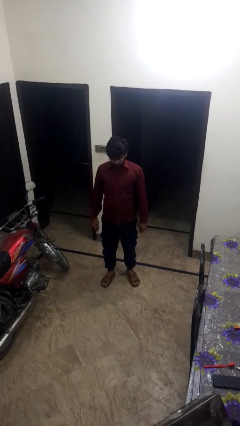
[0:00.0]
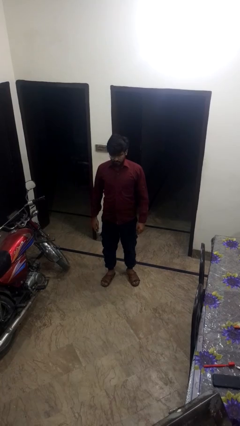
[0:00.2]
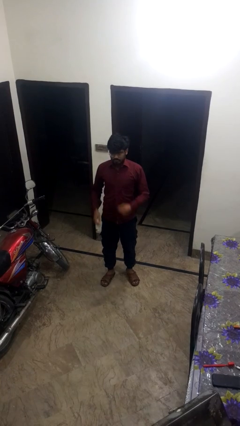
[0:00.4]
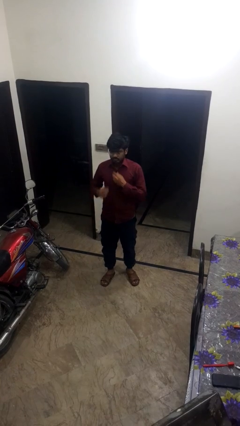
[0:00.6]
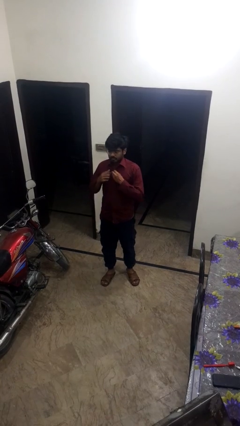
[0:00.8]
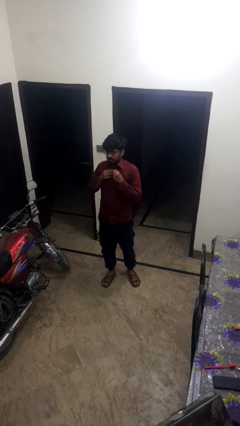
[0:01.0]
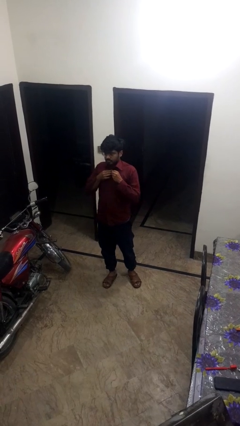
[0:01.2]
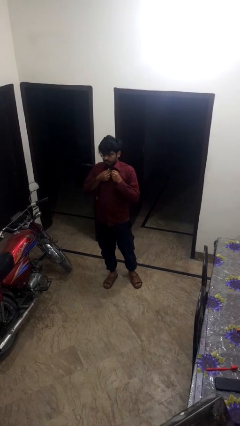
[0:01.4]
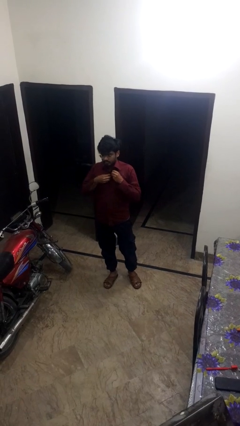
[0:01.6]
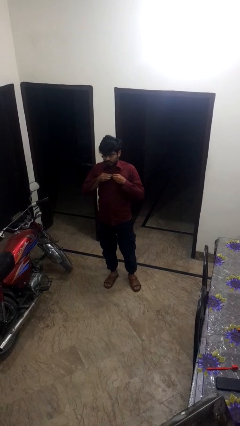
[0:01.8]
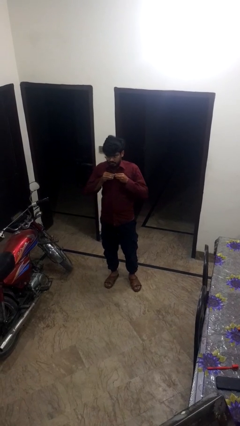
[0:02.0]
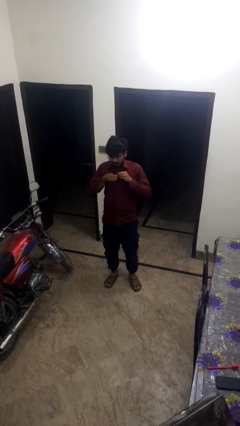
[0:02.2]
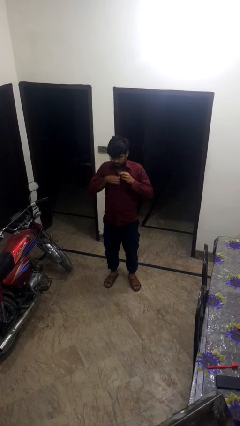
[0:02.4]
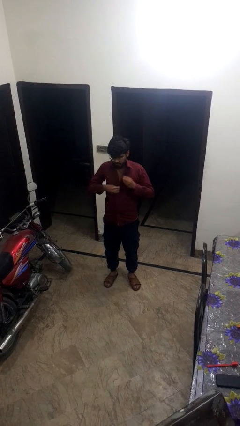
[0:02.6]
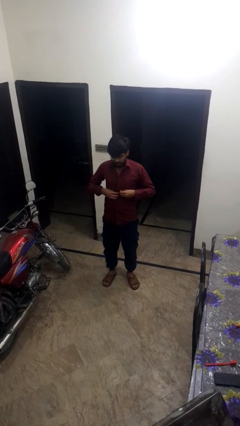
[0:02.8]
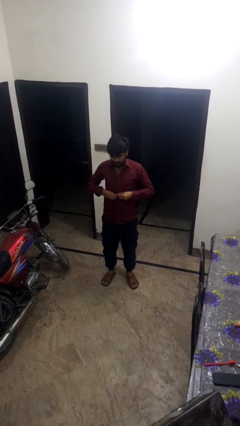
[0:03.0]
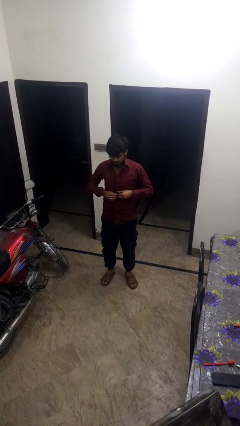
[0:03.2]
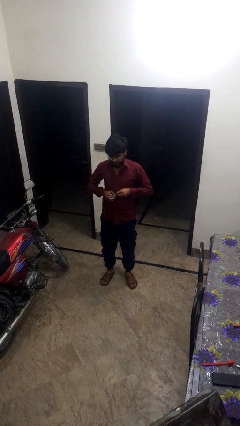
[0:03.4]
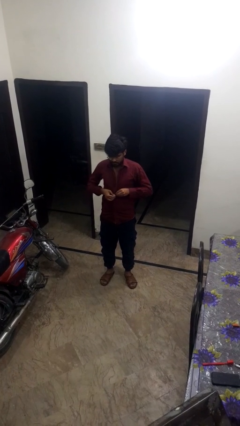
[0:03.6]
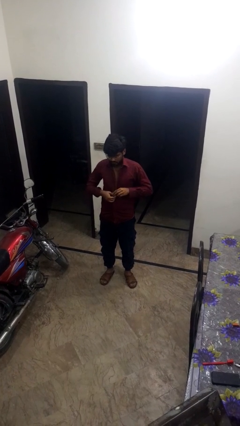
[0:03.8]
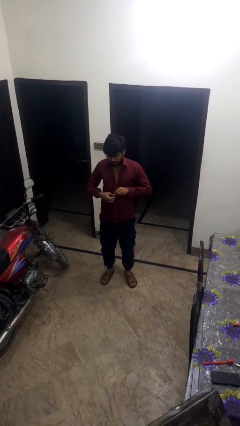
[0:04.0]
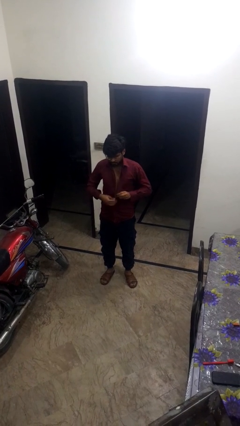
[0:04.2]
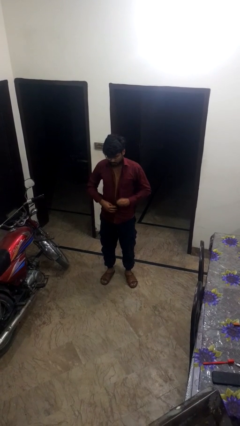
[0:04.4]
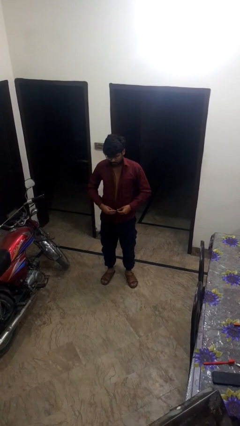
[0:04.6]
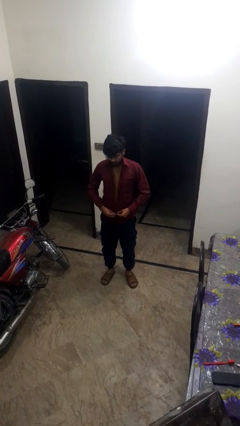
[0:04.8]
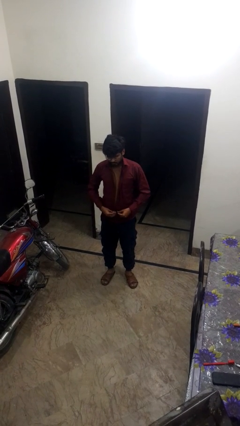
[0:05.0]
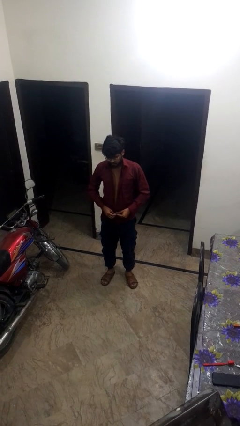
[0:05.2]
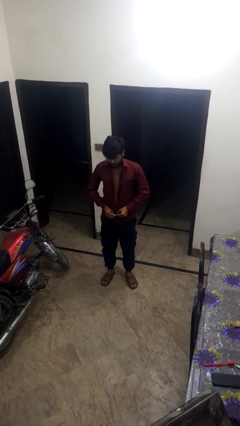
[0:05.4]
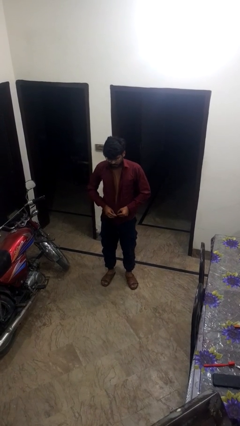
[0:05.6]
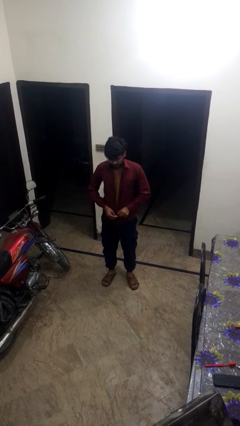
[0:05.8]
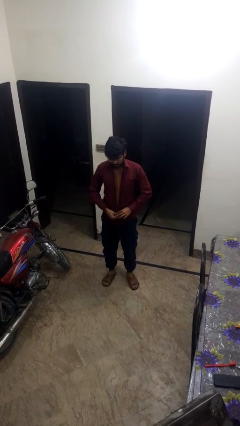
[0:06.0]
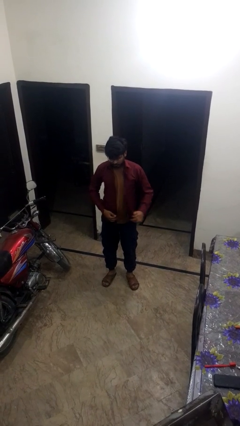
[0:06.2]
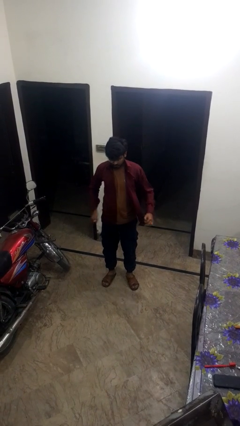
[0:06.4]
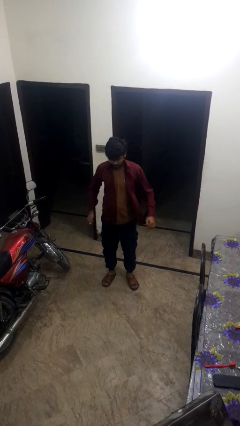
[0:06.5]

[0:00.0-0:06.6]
person unbuttons shirt

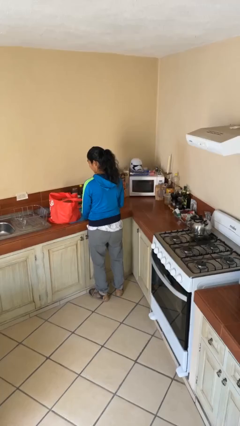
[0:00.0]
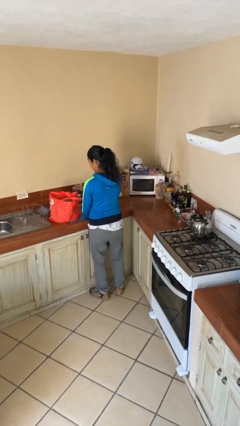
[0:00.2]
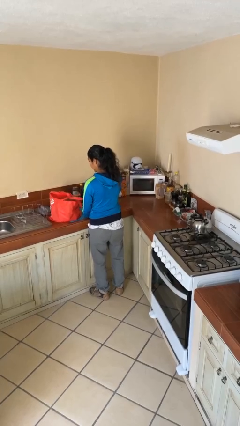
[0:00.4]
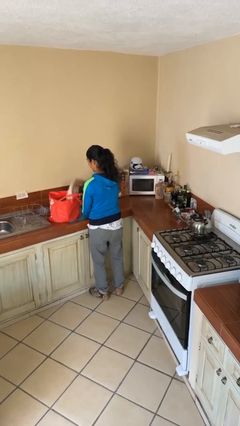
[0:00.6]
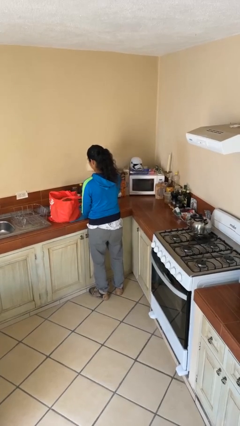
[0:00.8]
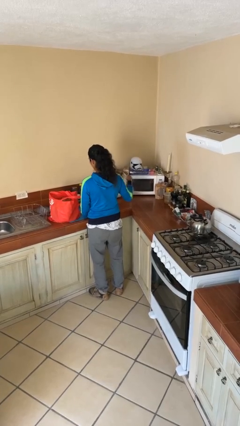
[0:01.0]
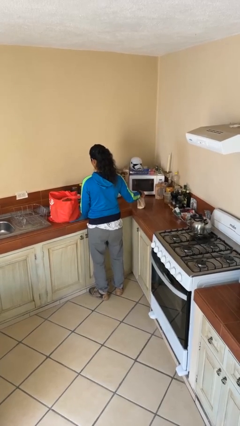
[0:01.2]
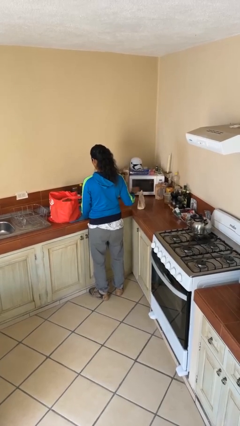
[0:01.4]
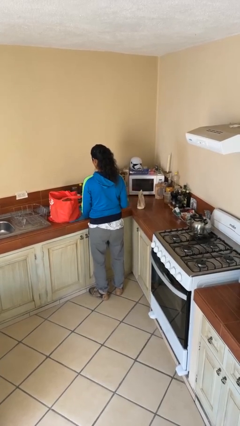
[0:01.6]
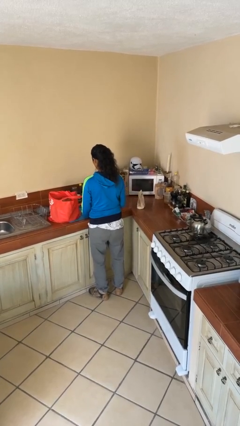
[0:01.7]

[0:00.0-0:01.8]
person takes object from bag

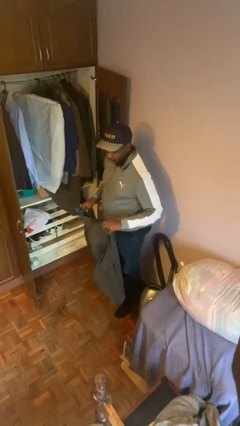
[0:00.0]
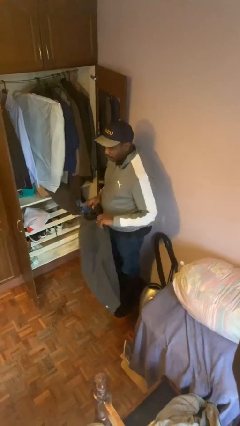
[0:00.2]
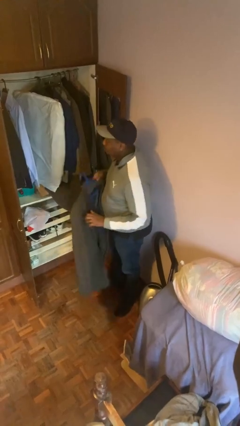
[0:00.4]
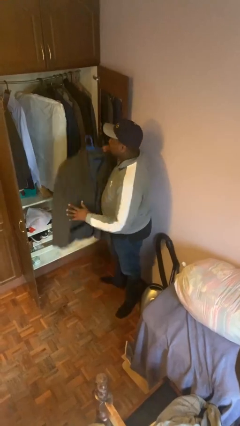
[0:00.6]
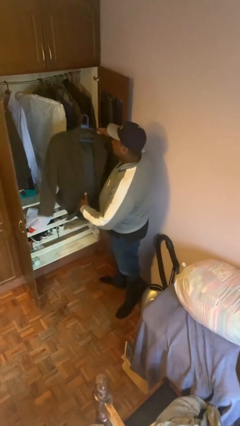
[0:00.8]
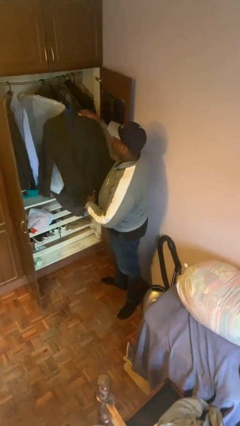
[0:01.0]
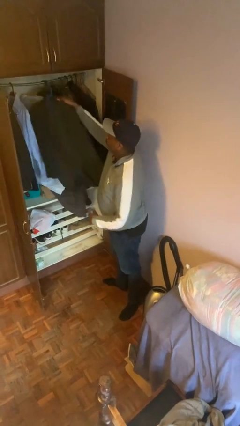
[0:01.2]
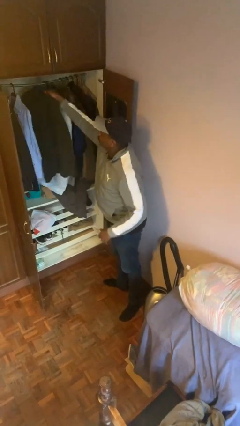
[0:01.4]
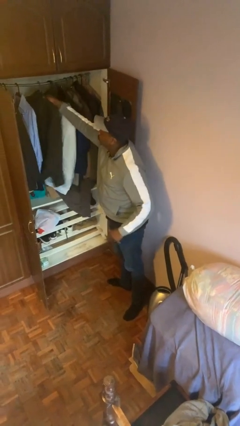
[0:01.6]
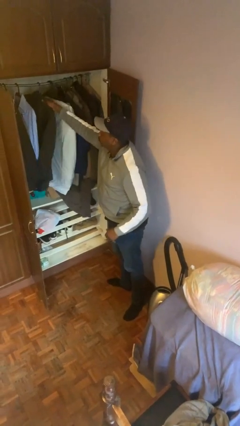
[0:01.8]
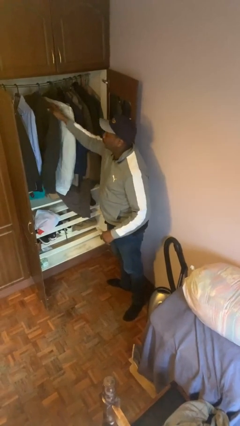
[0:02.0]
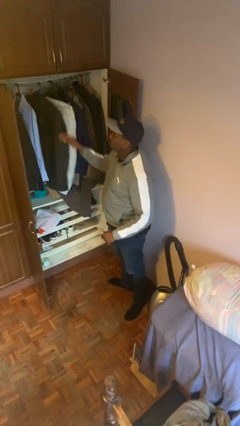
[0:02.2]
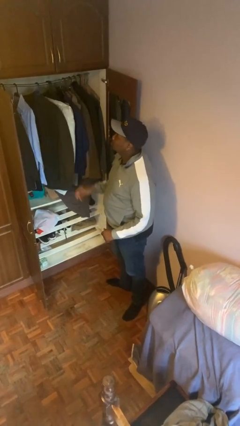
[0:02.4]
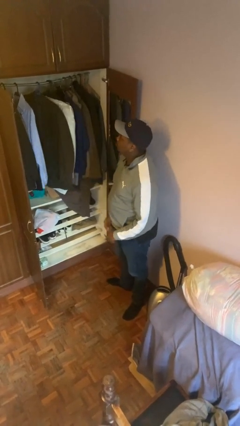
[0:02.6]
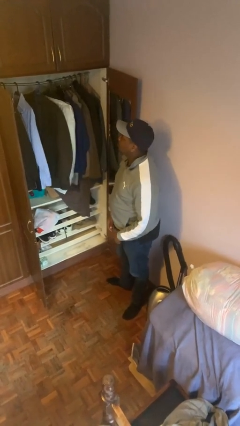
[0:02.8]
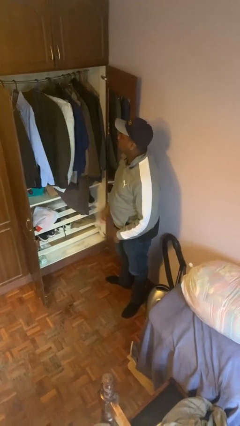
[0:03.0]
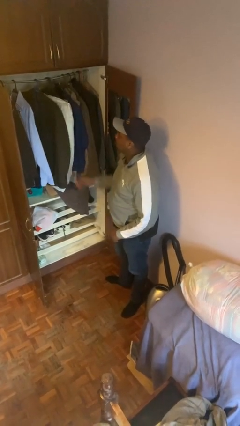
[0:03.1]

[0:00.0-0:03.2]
person puts clothes into closet

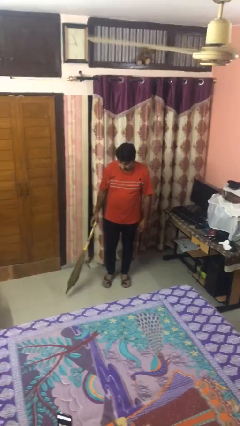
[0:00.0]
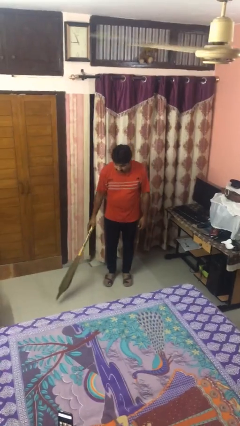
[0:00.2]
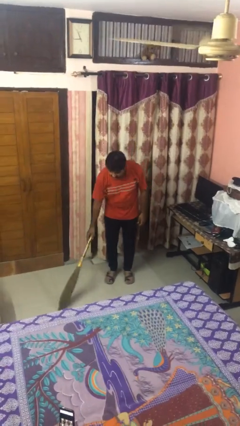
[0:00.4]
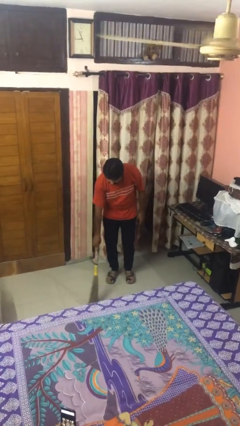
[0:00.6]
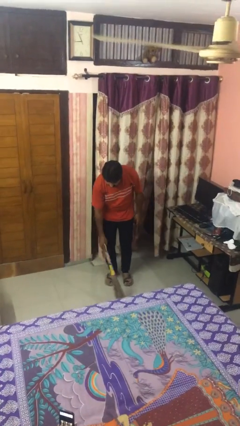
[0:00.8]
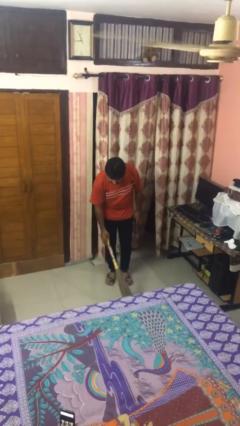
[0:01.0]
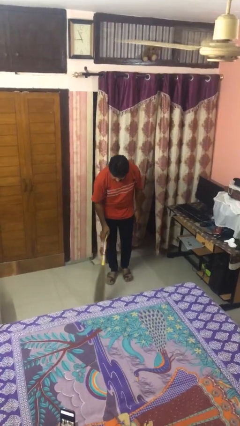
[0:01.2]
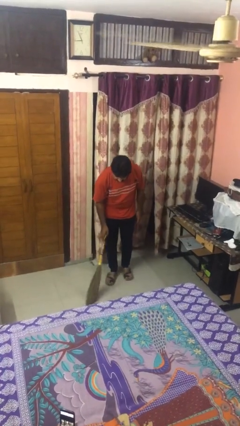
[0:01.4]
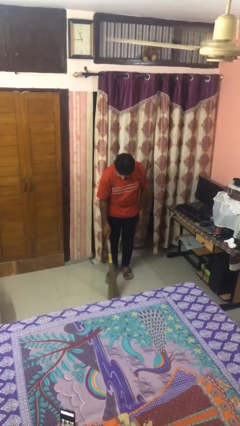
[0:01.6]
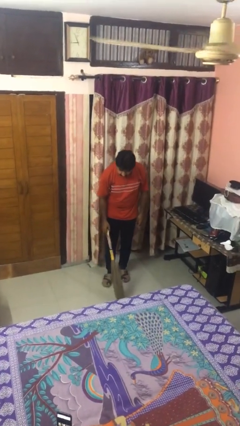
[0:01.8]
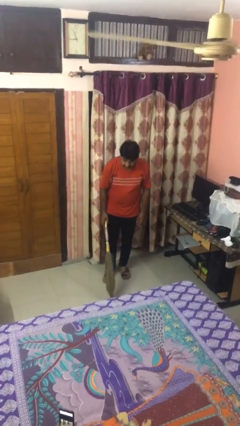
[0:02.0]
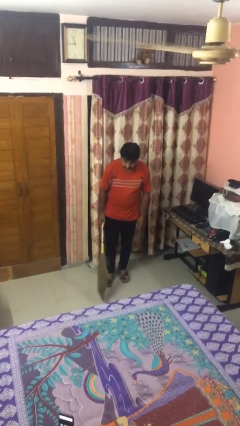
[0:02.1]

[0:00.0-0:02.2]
person sweeps floor

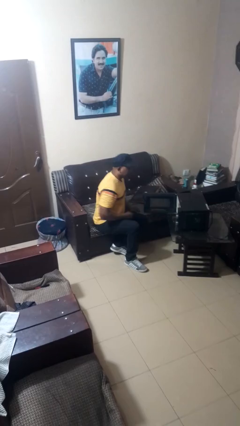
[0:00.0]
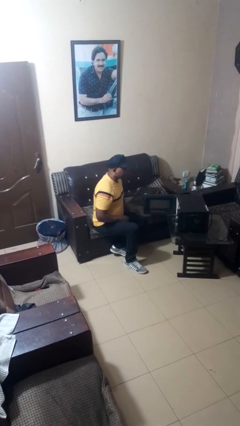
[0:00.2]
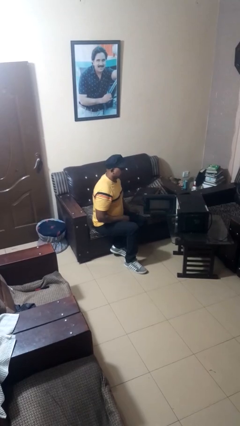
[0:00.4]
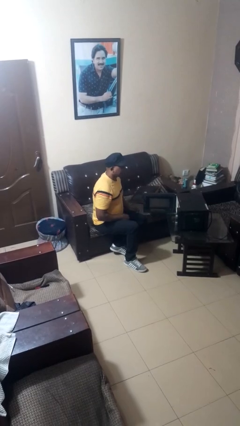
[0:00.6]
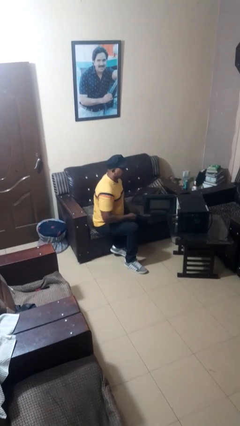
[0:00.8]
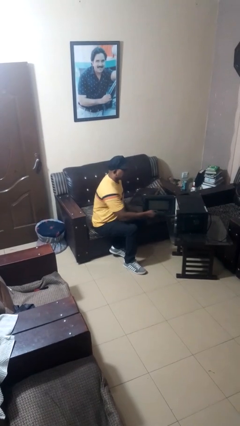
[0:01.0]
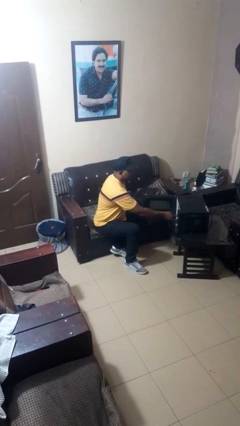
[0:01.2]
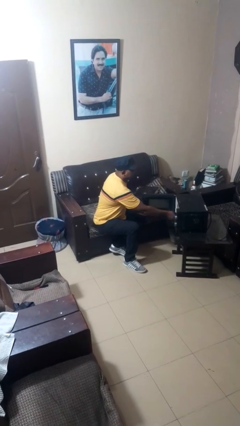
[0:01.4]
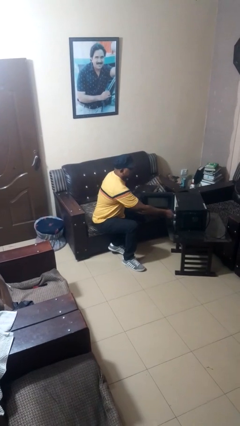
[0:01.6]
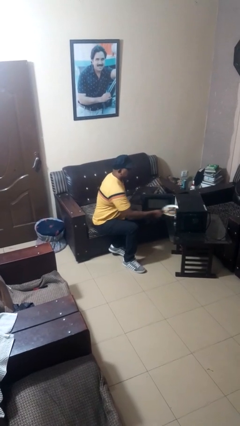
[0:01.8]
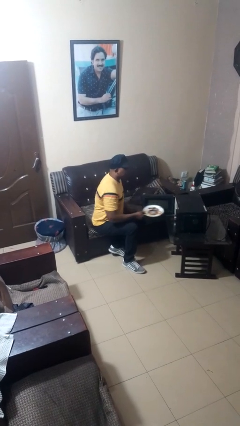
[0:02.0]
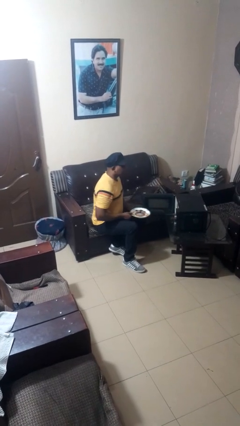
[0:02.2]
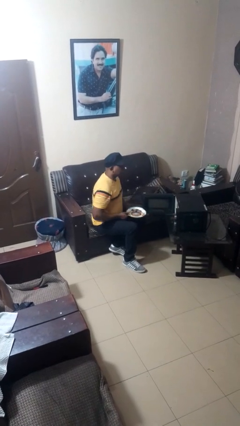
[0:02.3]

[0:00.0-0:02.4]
person takes object from microwave

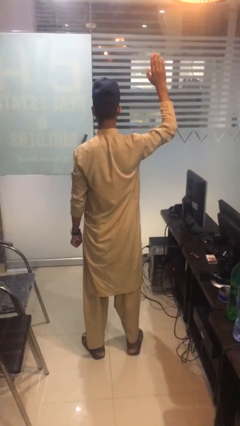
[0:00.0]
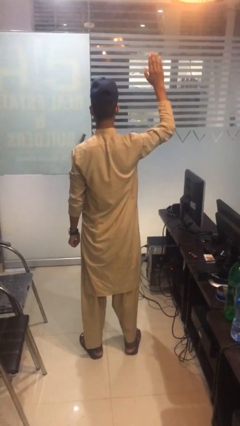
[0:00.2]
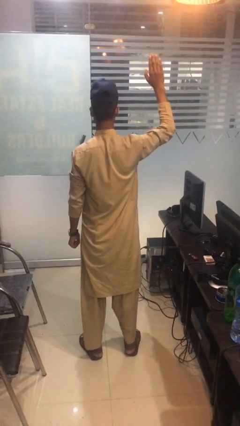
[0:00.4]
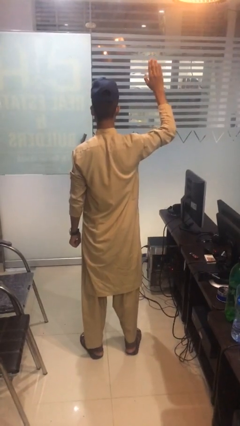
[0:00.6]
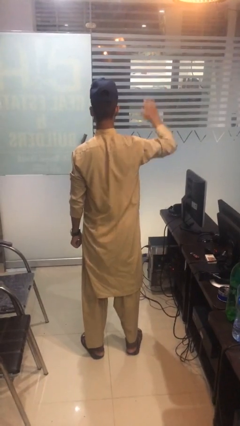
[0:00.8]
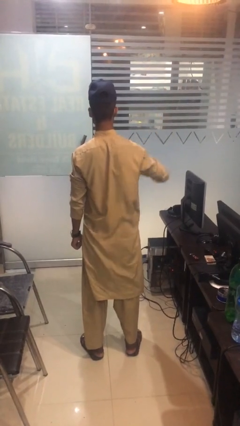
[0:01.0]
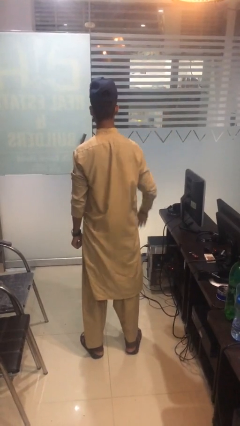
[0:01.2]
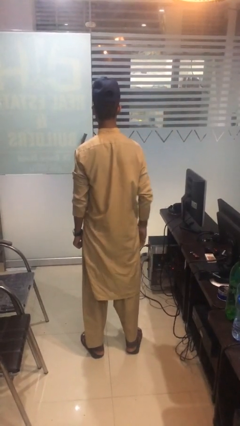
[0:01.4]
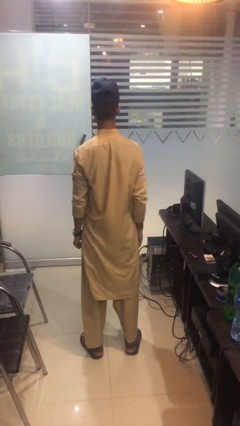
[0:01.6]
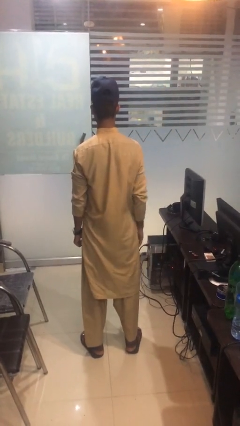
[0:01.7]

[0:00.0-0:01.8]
person gestures lower hand
